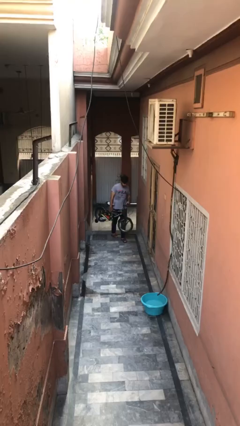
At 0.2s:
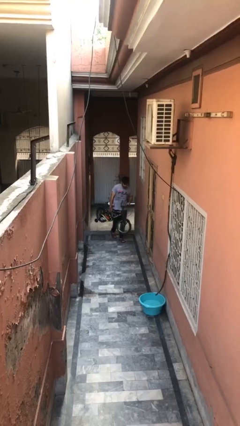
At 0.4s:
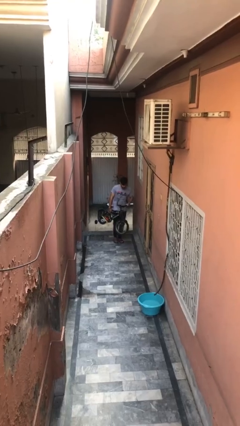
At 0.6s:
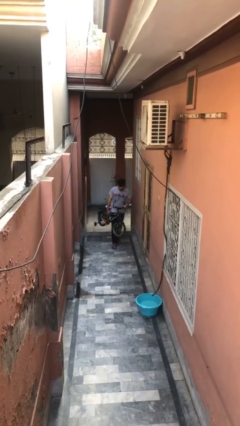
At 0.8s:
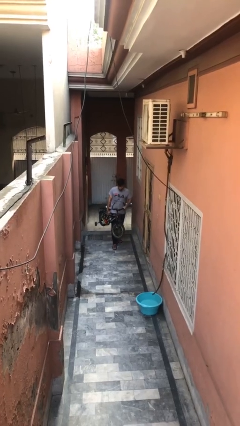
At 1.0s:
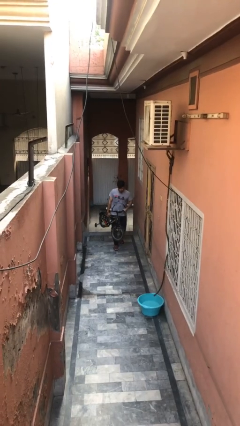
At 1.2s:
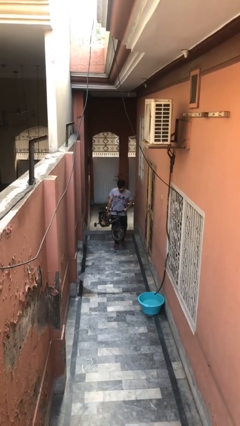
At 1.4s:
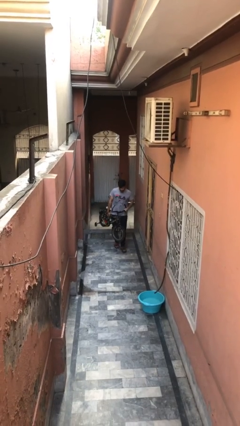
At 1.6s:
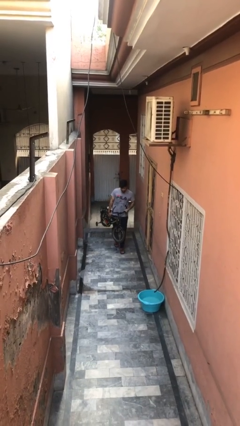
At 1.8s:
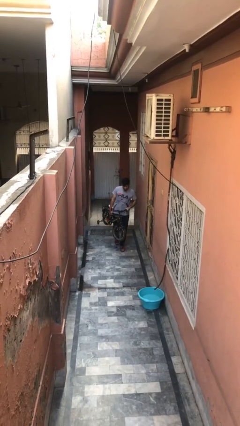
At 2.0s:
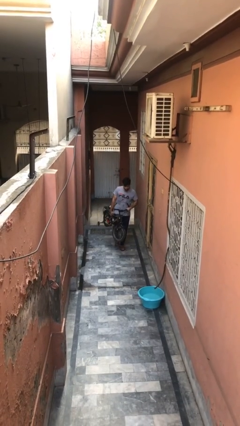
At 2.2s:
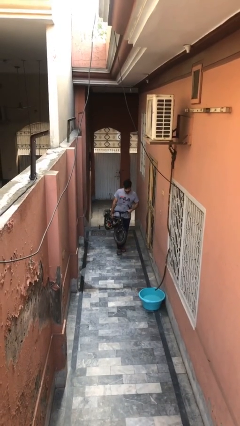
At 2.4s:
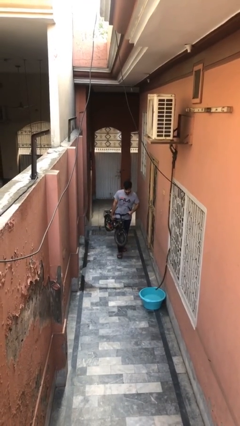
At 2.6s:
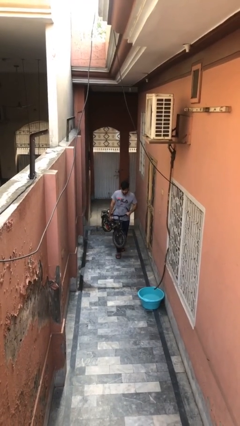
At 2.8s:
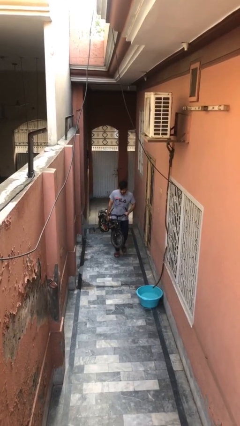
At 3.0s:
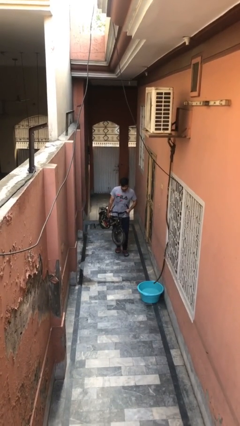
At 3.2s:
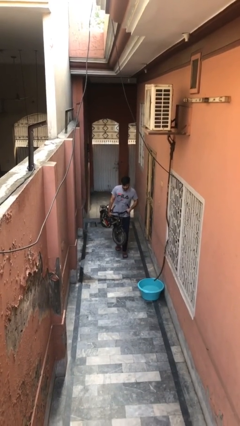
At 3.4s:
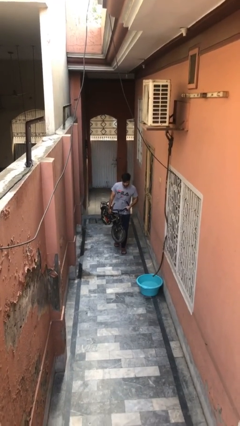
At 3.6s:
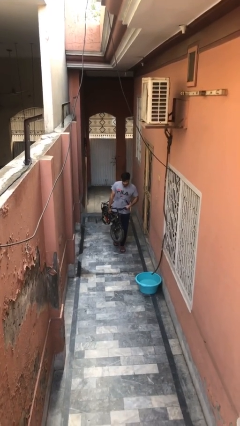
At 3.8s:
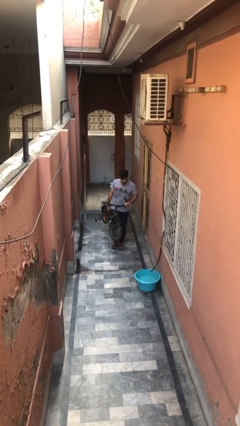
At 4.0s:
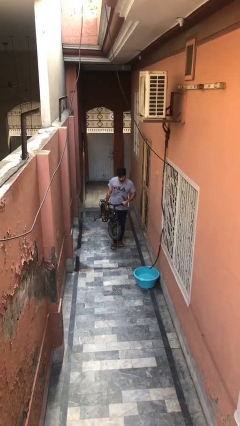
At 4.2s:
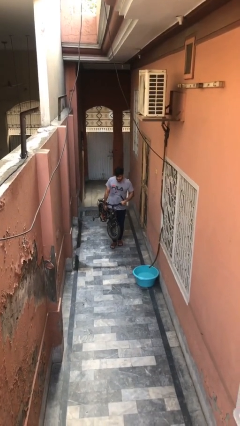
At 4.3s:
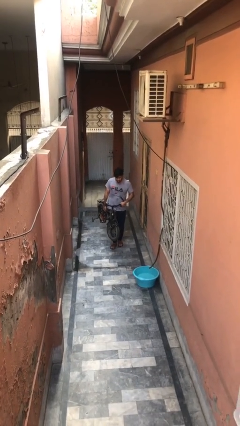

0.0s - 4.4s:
person carries bicycle

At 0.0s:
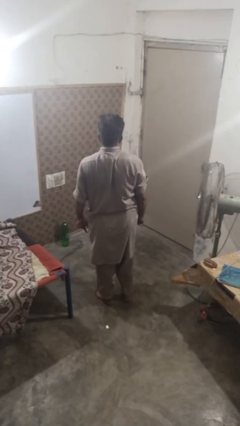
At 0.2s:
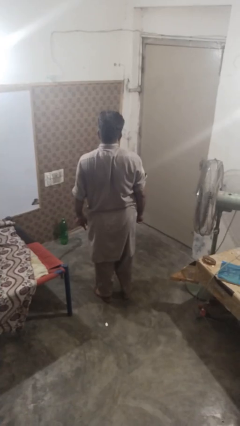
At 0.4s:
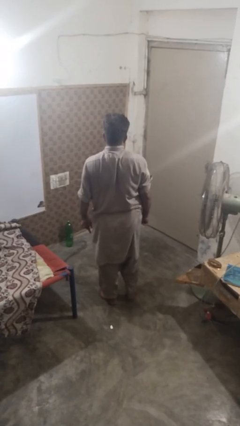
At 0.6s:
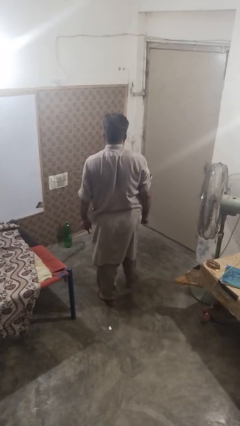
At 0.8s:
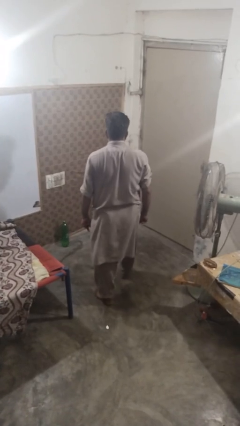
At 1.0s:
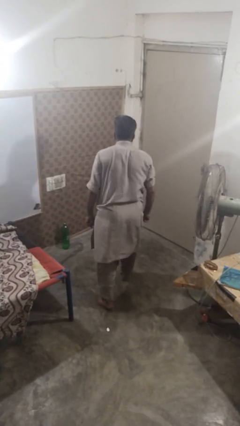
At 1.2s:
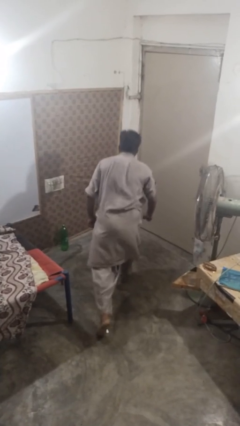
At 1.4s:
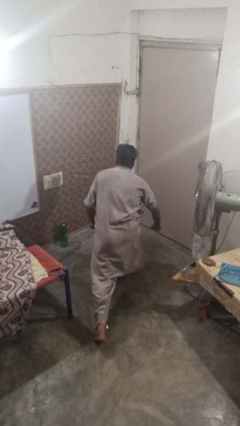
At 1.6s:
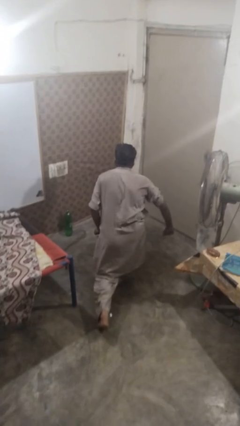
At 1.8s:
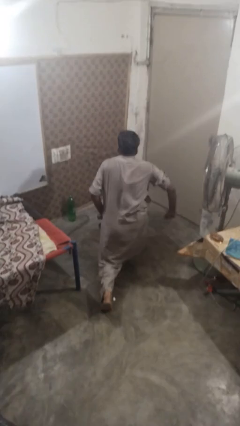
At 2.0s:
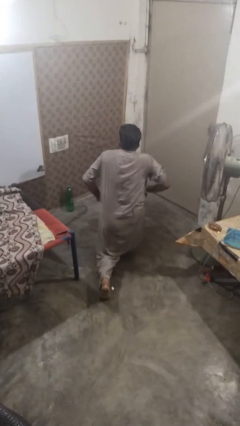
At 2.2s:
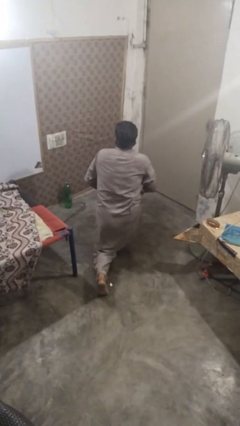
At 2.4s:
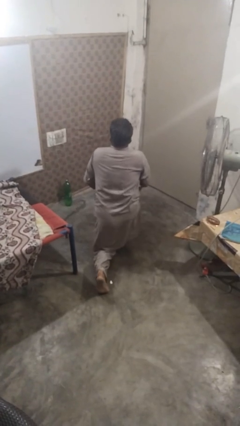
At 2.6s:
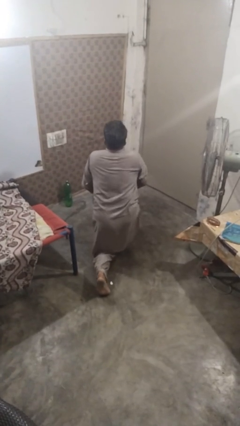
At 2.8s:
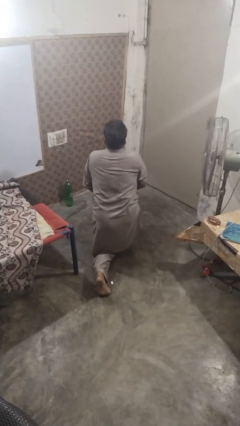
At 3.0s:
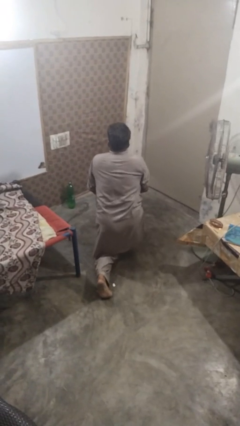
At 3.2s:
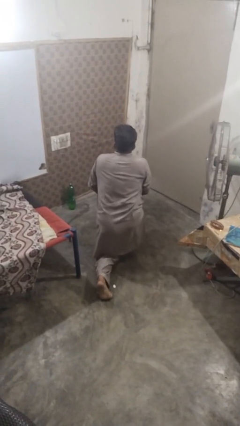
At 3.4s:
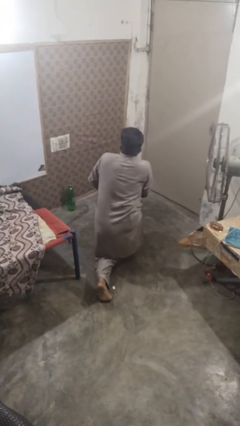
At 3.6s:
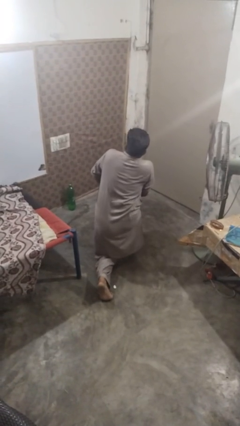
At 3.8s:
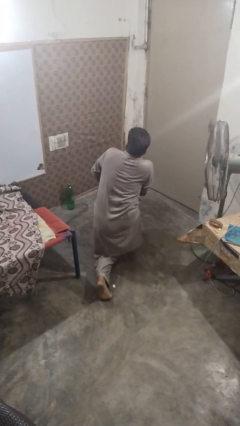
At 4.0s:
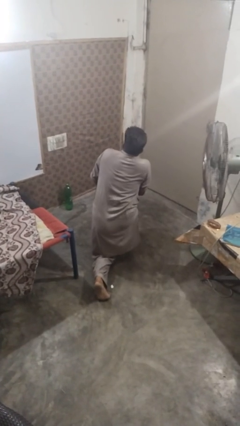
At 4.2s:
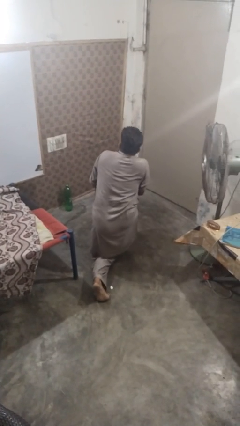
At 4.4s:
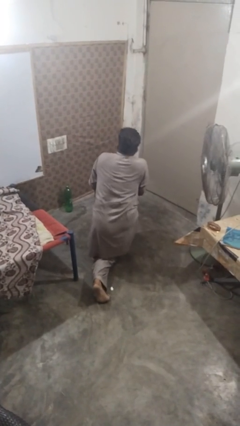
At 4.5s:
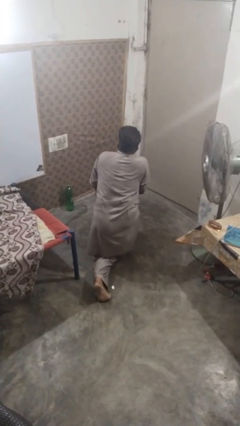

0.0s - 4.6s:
person kneels

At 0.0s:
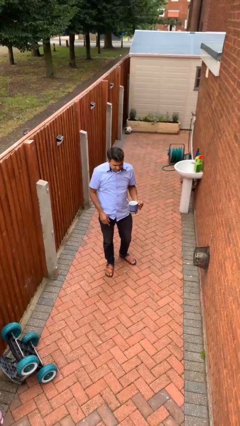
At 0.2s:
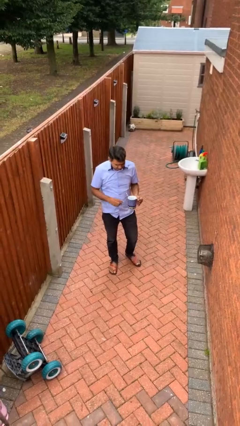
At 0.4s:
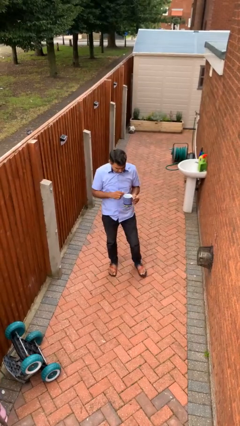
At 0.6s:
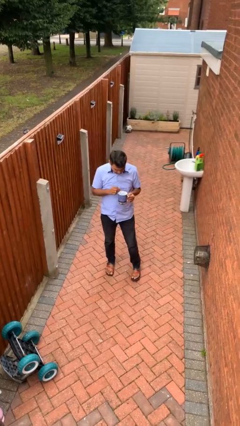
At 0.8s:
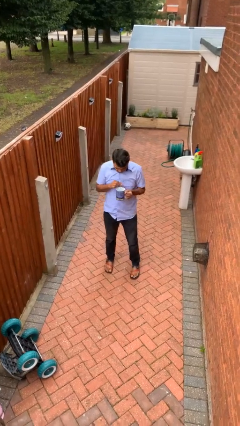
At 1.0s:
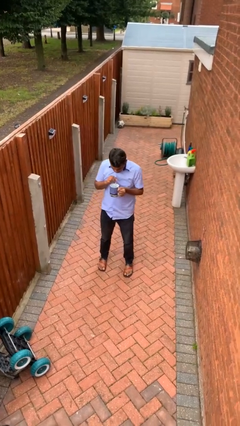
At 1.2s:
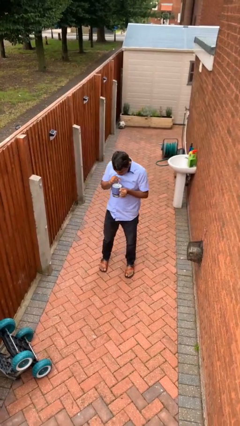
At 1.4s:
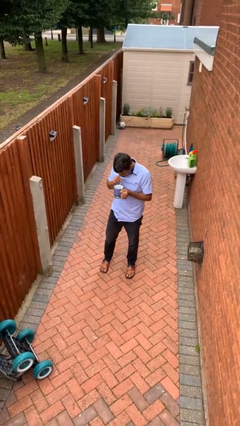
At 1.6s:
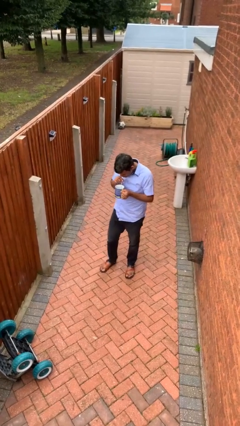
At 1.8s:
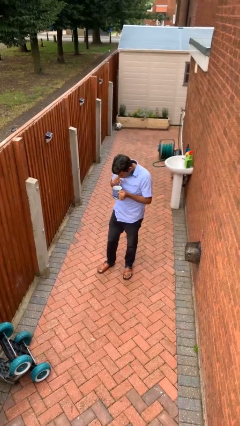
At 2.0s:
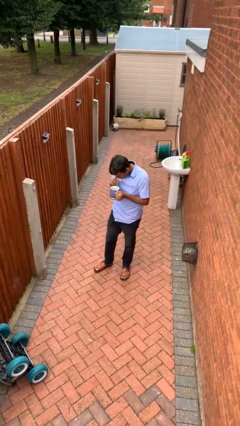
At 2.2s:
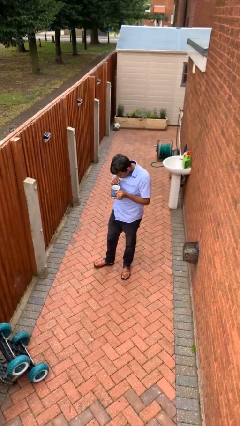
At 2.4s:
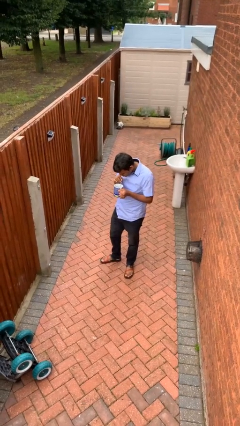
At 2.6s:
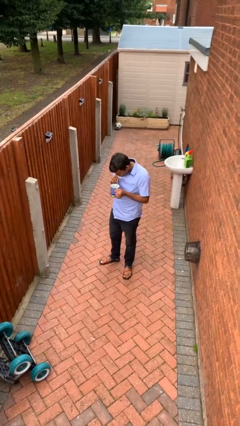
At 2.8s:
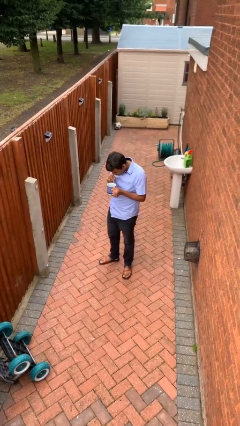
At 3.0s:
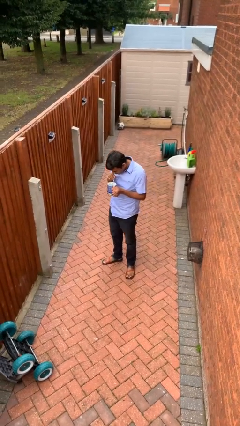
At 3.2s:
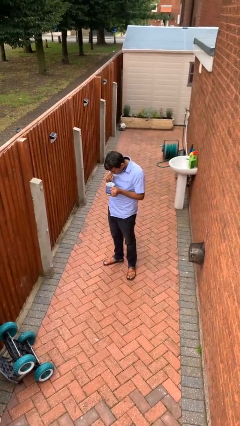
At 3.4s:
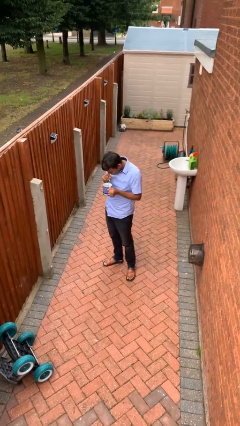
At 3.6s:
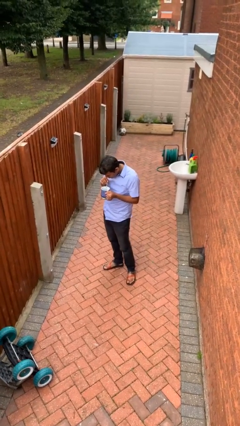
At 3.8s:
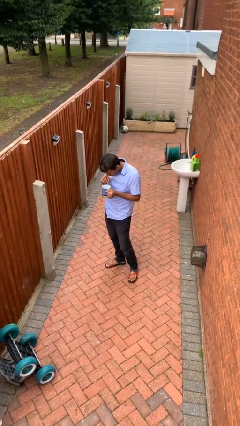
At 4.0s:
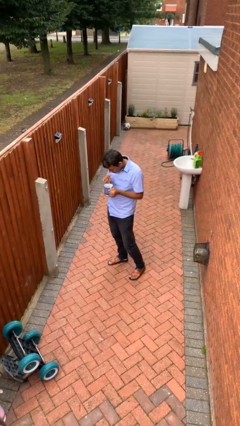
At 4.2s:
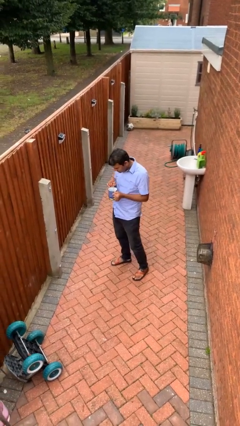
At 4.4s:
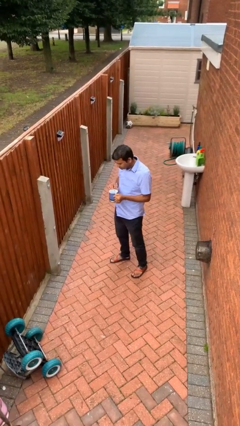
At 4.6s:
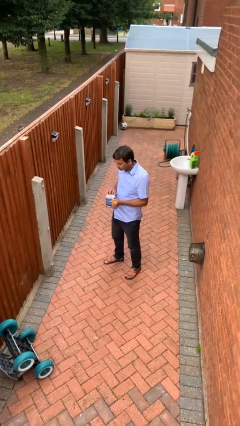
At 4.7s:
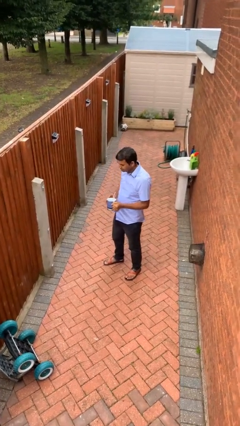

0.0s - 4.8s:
person drinks from straw

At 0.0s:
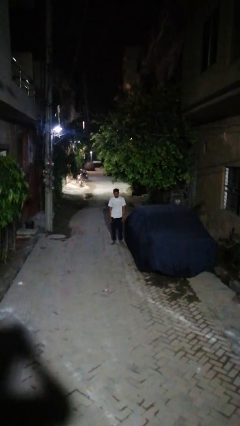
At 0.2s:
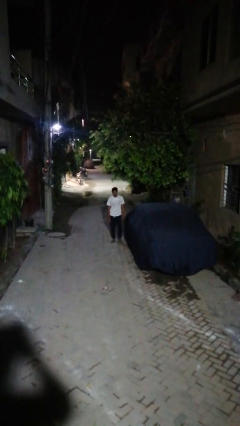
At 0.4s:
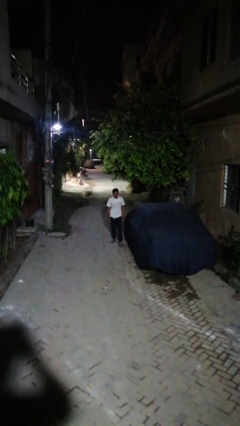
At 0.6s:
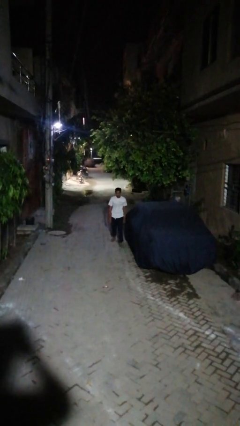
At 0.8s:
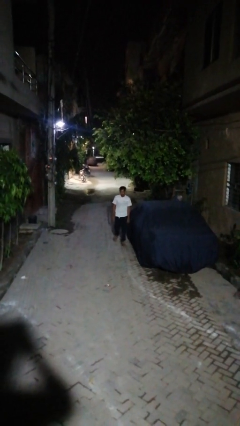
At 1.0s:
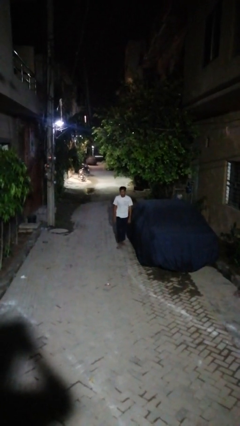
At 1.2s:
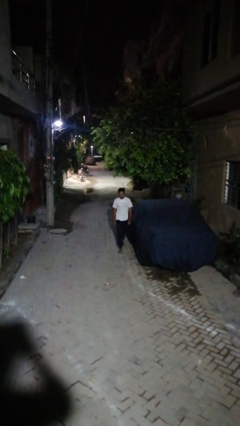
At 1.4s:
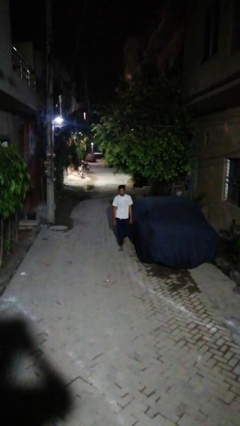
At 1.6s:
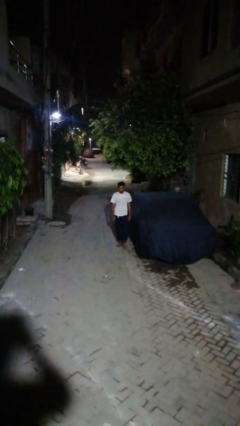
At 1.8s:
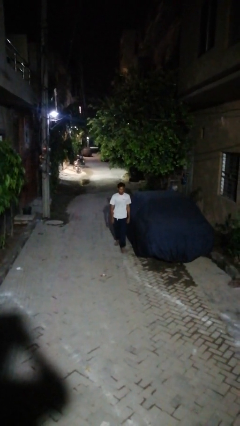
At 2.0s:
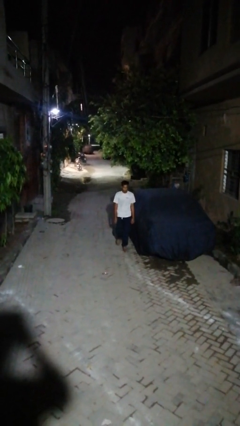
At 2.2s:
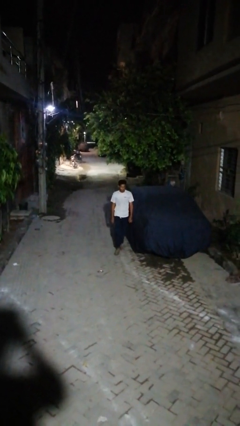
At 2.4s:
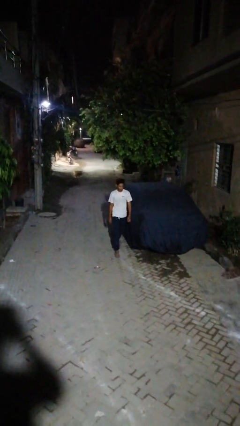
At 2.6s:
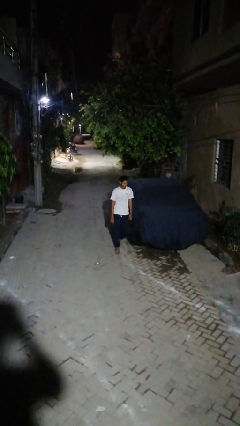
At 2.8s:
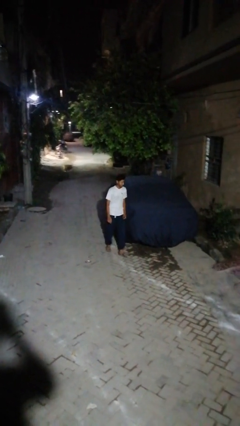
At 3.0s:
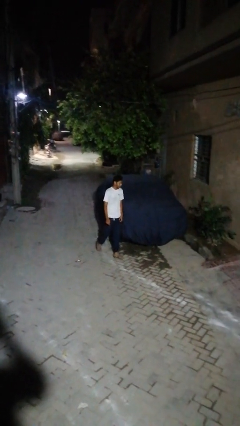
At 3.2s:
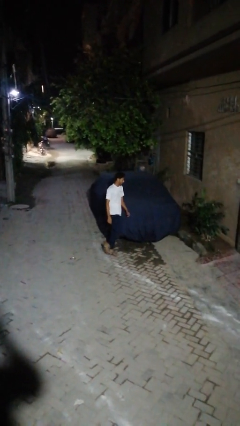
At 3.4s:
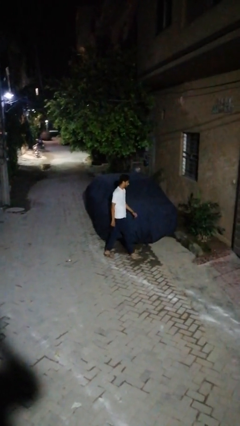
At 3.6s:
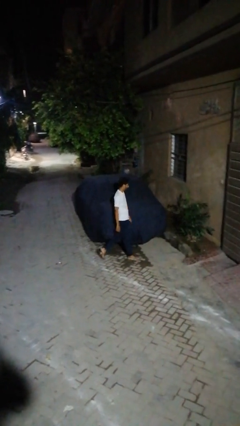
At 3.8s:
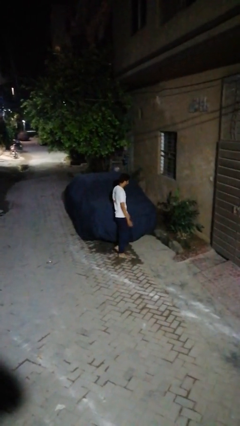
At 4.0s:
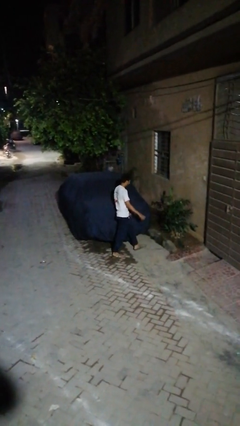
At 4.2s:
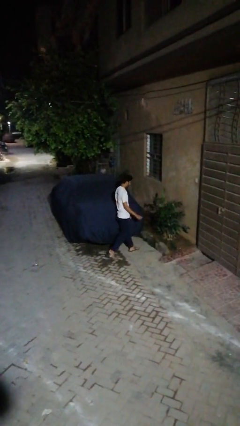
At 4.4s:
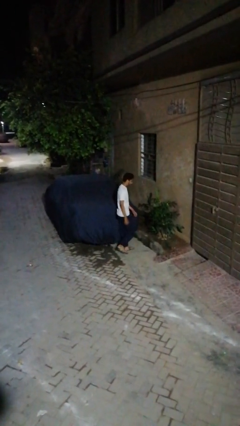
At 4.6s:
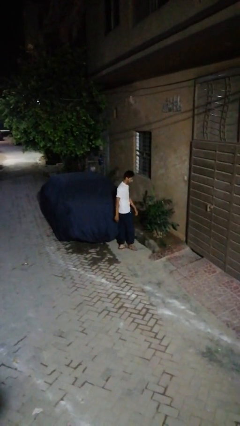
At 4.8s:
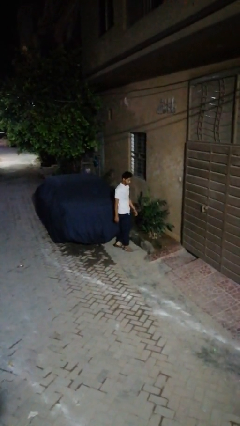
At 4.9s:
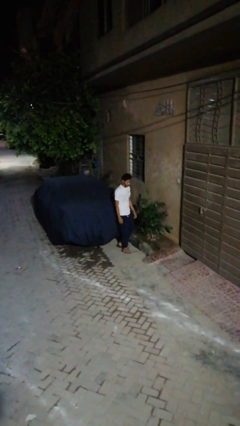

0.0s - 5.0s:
person walks around car
